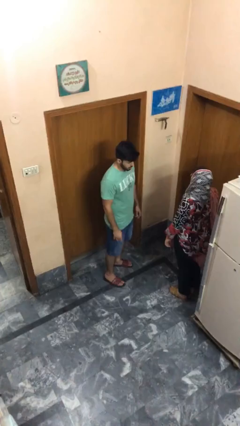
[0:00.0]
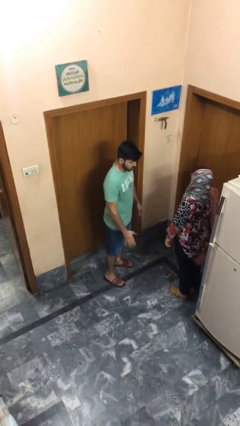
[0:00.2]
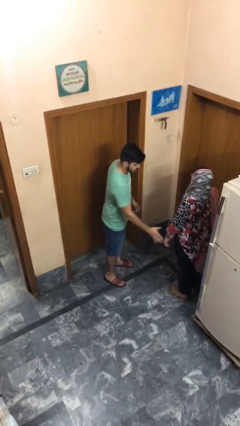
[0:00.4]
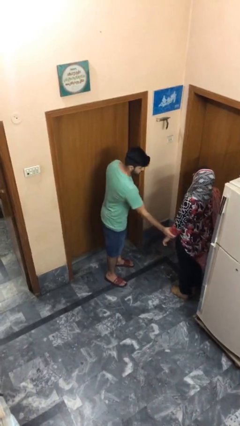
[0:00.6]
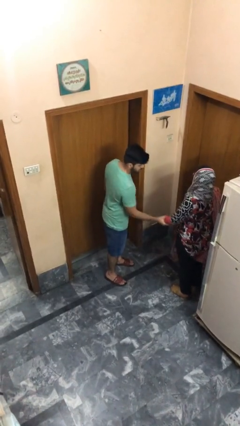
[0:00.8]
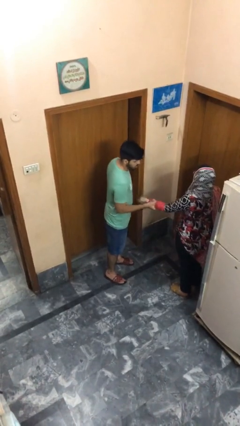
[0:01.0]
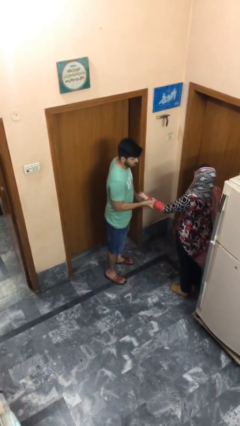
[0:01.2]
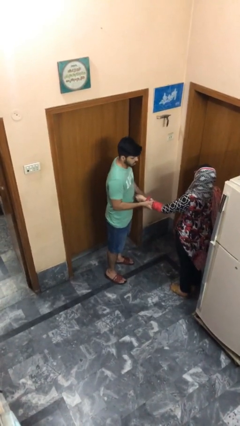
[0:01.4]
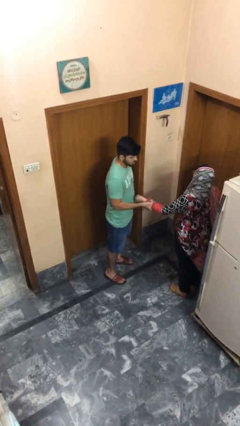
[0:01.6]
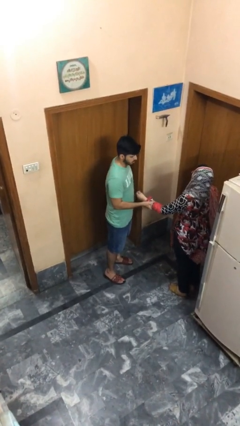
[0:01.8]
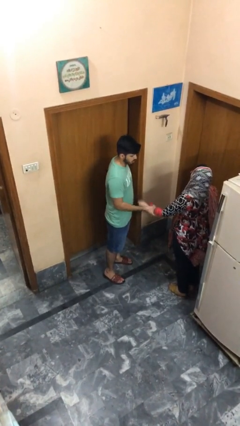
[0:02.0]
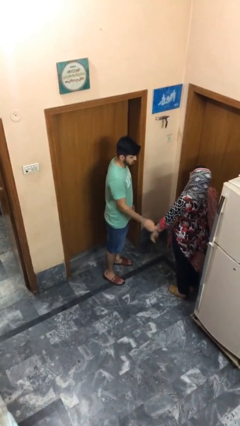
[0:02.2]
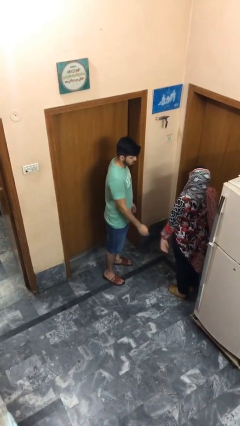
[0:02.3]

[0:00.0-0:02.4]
person grabs person by forearm

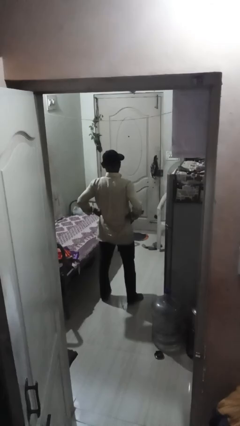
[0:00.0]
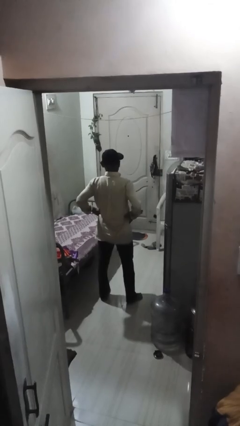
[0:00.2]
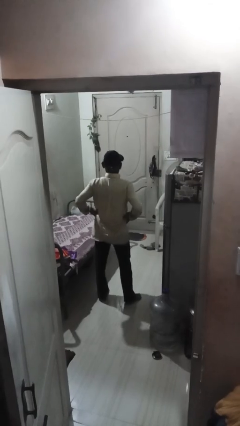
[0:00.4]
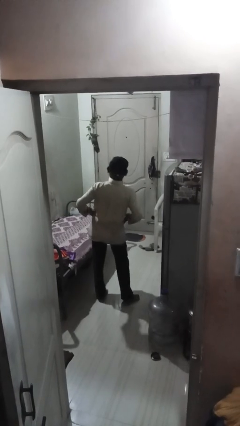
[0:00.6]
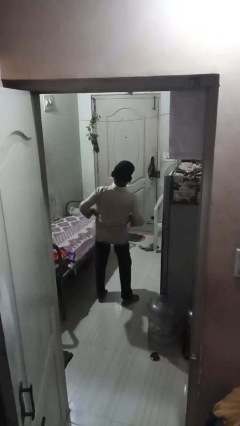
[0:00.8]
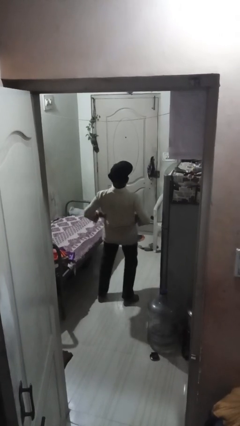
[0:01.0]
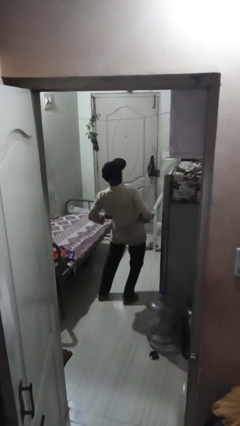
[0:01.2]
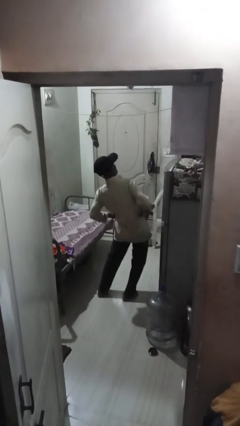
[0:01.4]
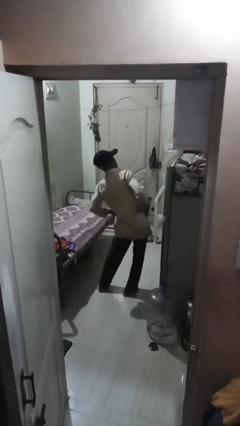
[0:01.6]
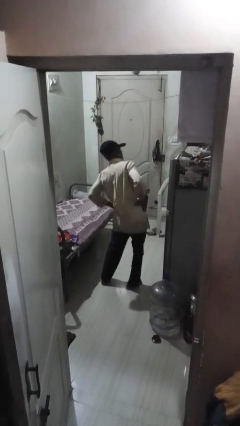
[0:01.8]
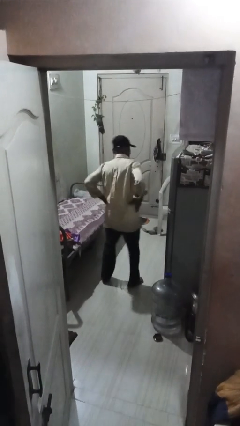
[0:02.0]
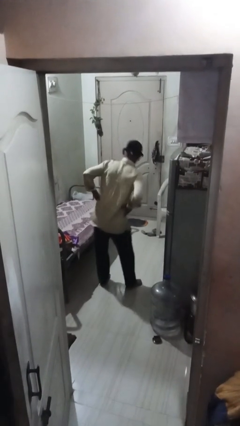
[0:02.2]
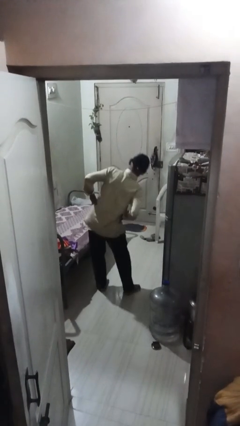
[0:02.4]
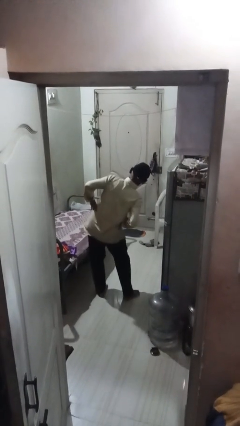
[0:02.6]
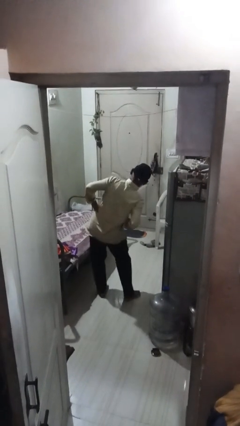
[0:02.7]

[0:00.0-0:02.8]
person wiggles hips

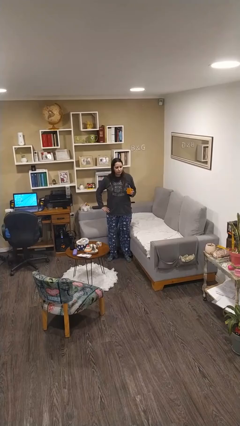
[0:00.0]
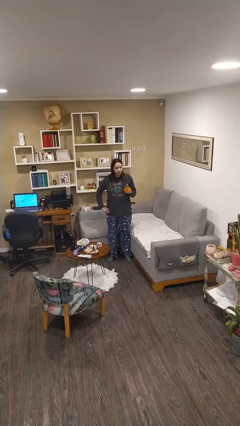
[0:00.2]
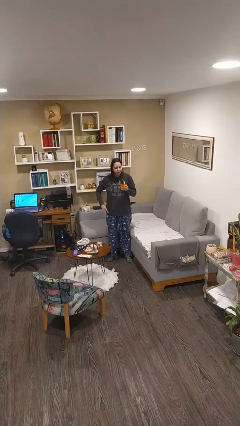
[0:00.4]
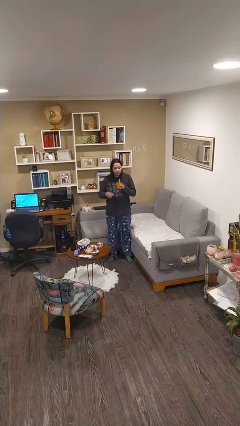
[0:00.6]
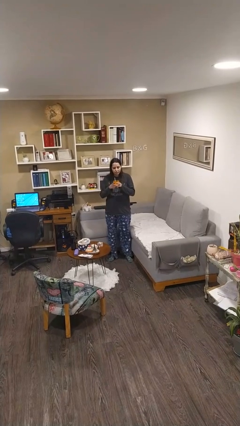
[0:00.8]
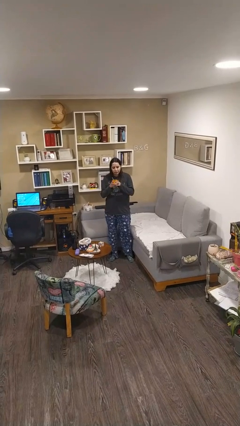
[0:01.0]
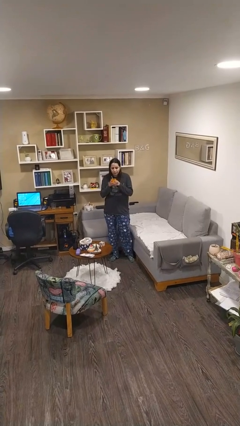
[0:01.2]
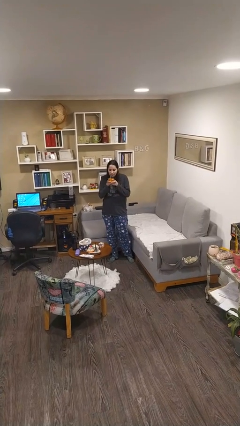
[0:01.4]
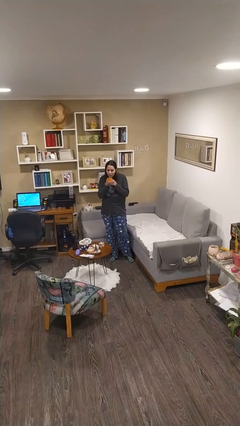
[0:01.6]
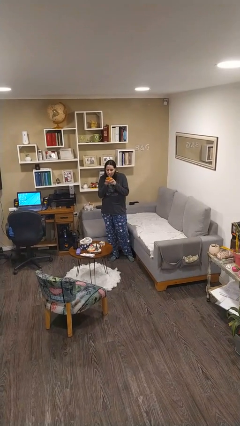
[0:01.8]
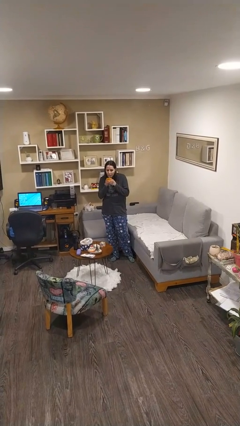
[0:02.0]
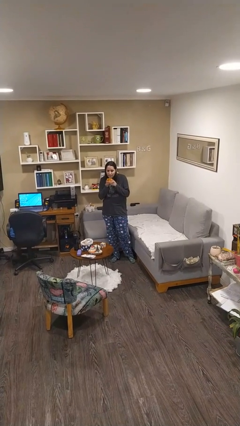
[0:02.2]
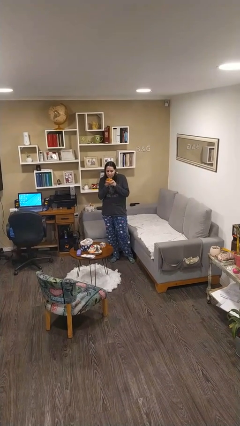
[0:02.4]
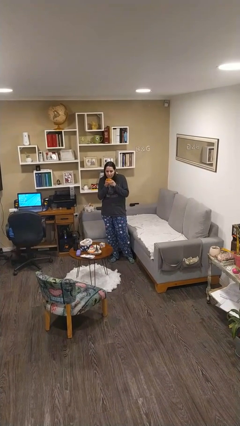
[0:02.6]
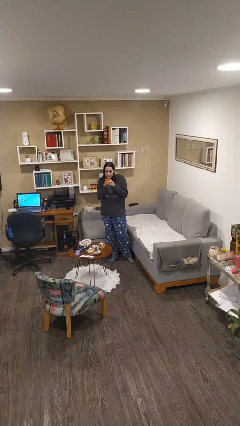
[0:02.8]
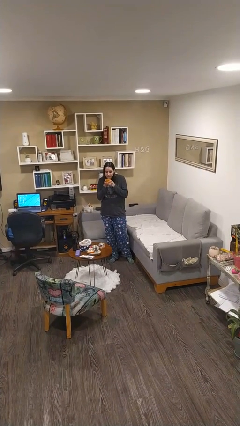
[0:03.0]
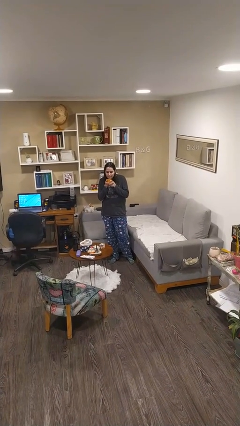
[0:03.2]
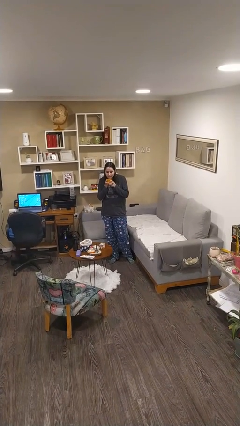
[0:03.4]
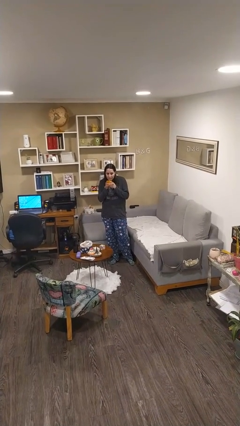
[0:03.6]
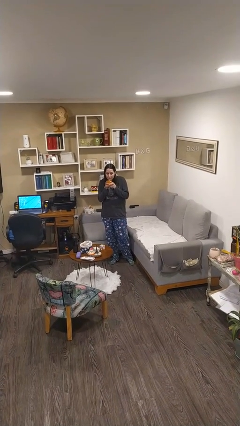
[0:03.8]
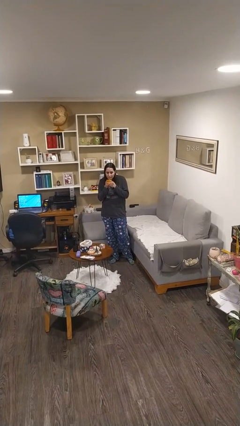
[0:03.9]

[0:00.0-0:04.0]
person drinks from straw

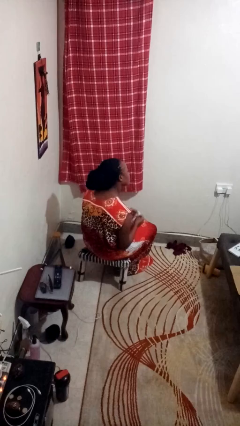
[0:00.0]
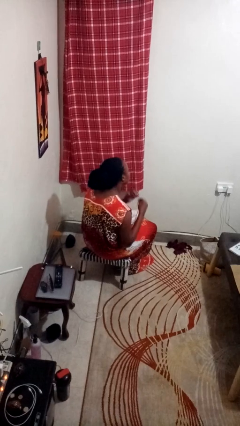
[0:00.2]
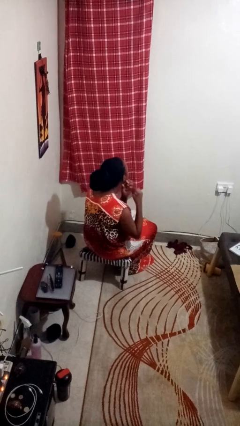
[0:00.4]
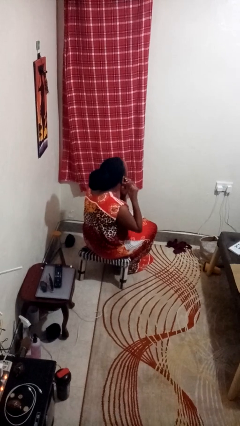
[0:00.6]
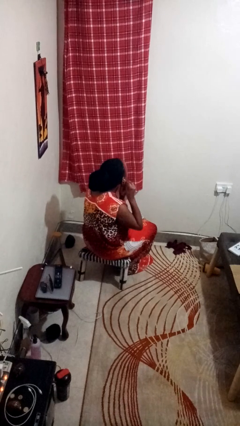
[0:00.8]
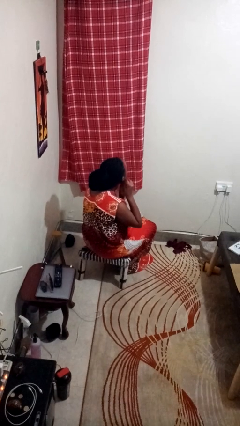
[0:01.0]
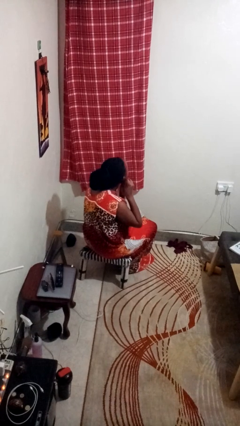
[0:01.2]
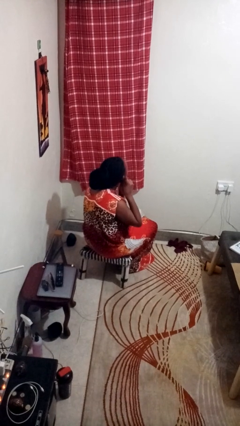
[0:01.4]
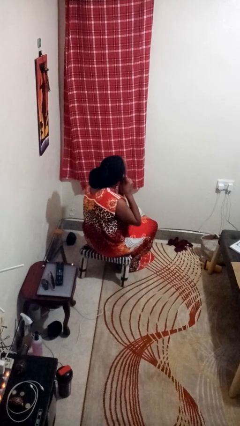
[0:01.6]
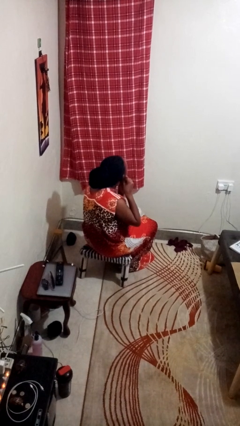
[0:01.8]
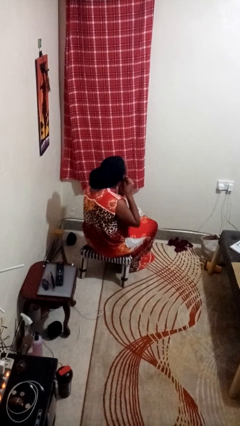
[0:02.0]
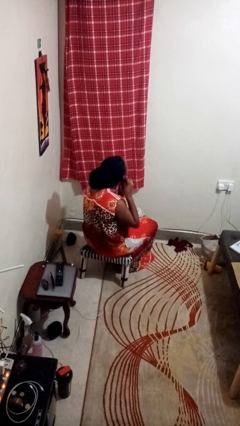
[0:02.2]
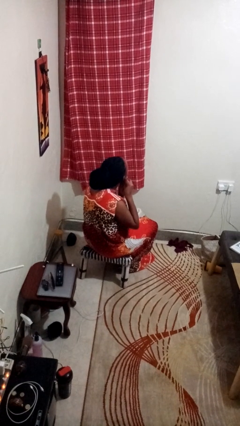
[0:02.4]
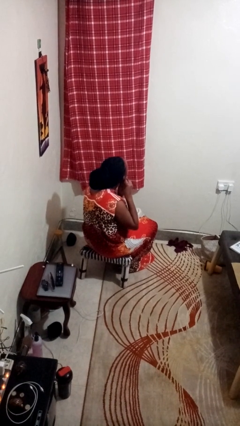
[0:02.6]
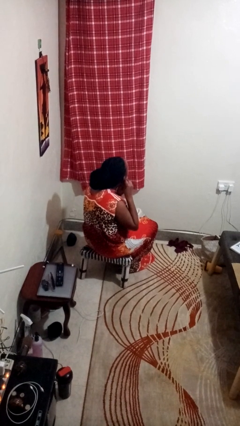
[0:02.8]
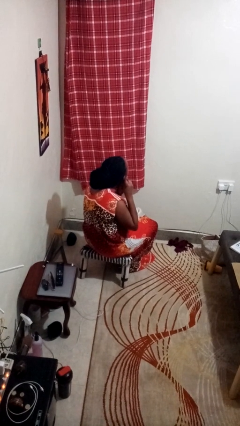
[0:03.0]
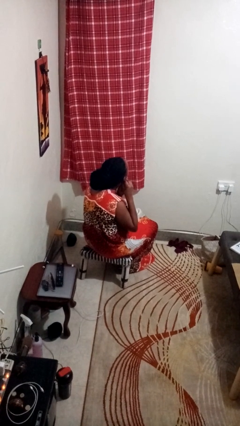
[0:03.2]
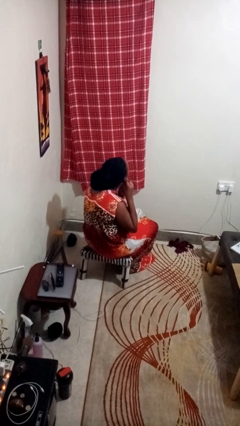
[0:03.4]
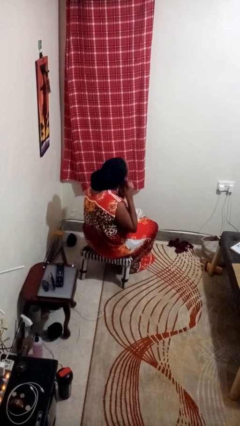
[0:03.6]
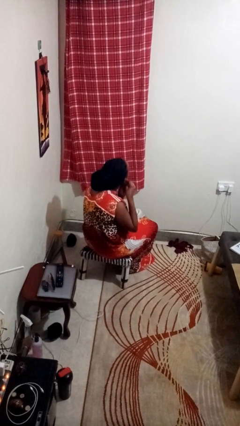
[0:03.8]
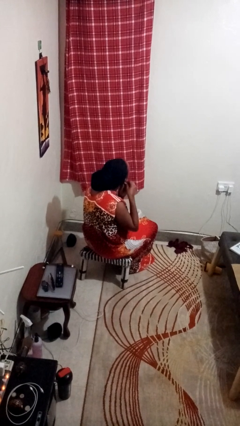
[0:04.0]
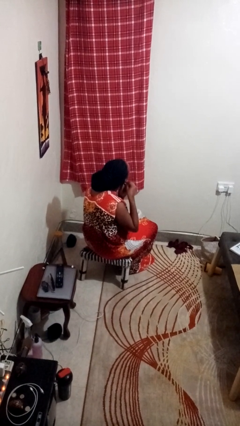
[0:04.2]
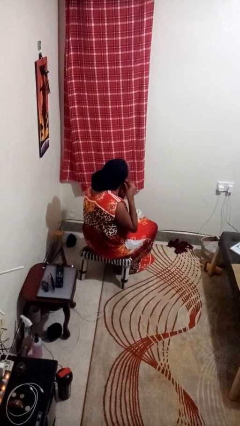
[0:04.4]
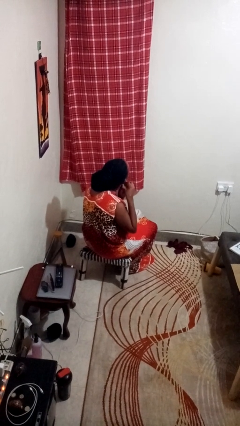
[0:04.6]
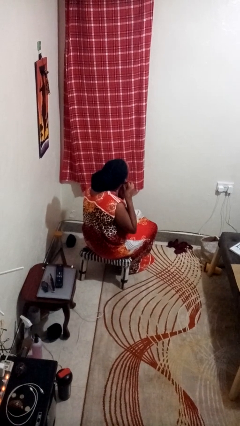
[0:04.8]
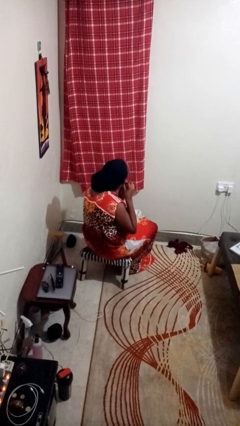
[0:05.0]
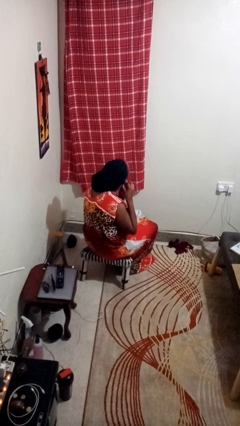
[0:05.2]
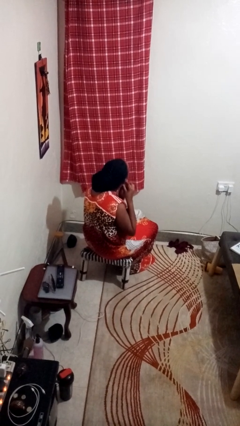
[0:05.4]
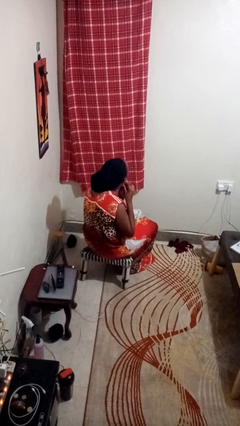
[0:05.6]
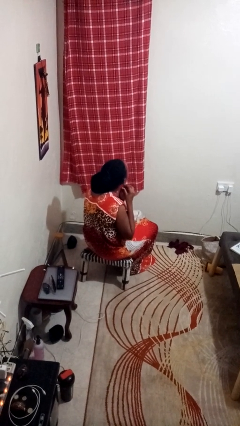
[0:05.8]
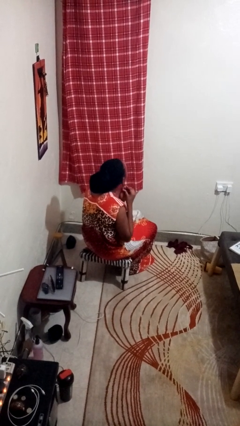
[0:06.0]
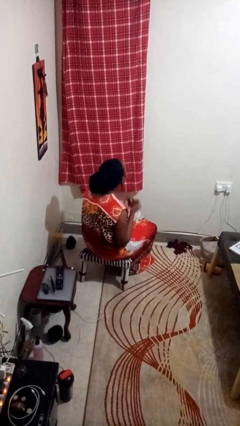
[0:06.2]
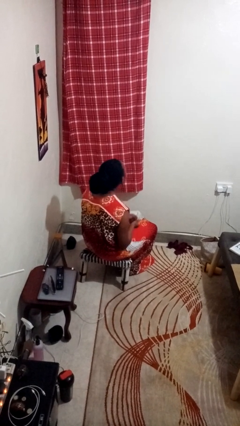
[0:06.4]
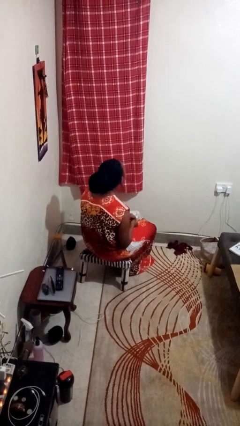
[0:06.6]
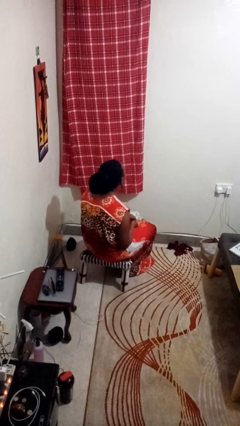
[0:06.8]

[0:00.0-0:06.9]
person puts on earrings

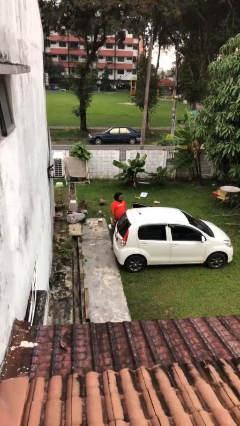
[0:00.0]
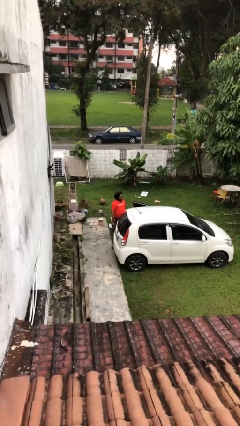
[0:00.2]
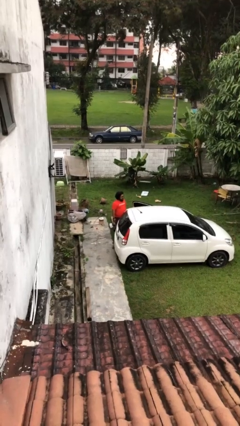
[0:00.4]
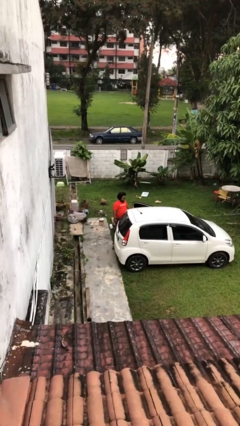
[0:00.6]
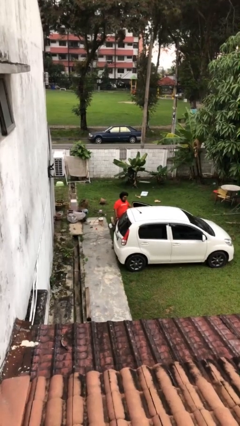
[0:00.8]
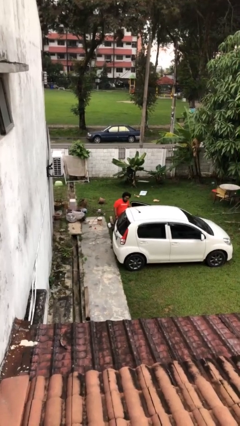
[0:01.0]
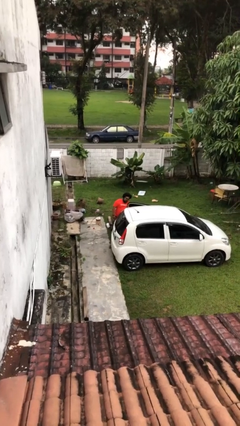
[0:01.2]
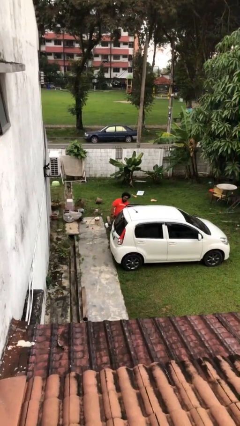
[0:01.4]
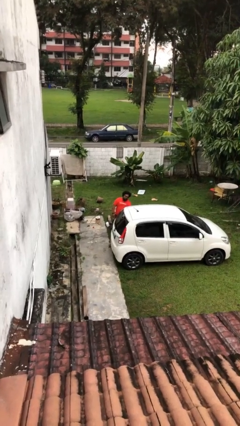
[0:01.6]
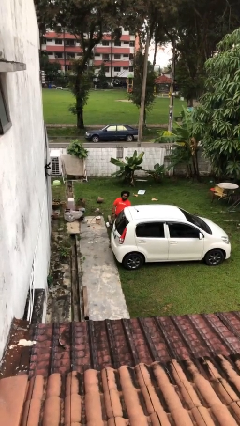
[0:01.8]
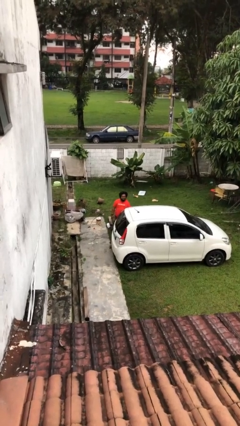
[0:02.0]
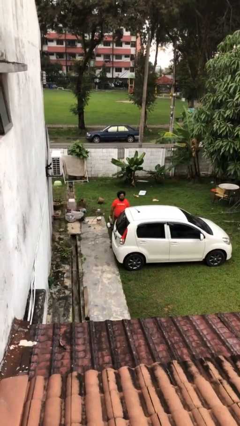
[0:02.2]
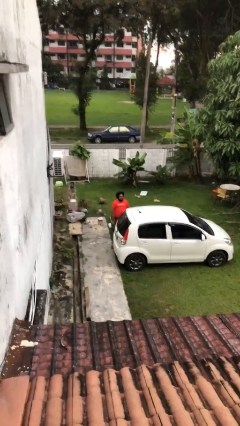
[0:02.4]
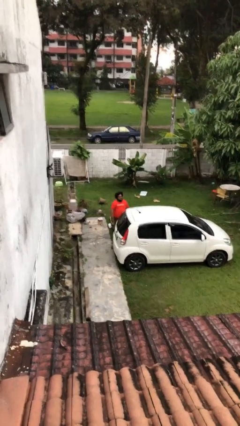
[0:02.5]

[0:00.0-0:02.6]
person closes car door
